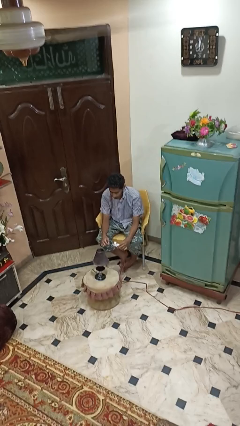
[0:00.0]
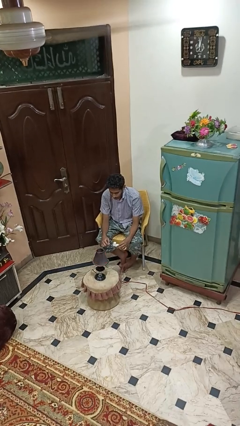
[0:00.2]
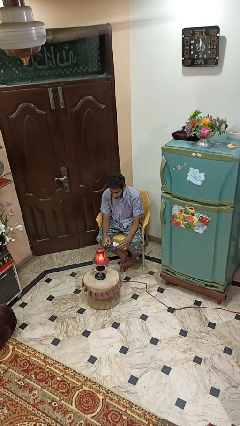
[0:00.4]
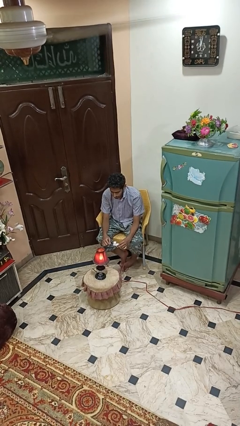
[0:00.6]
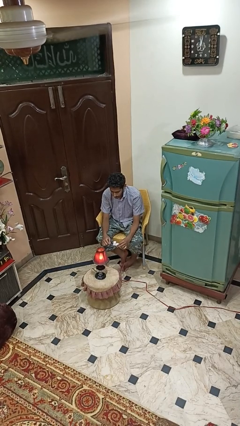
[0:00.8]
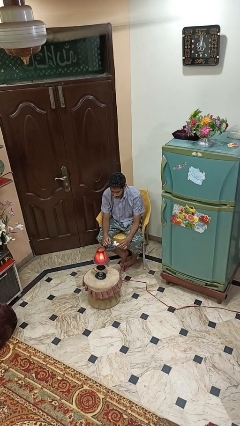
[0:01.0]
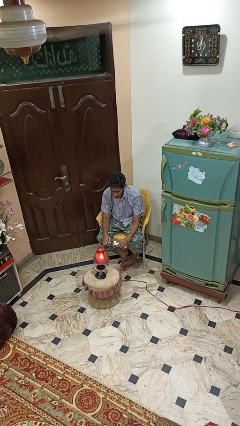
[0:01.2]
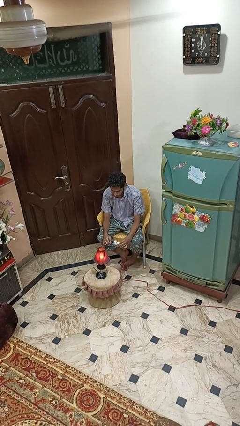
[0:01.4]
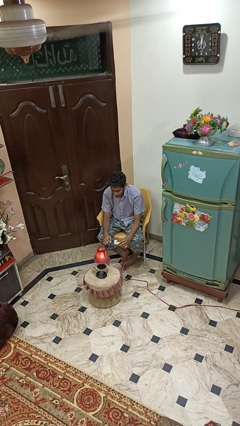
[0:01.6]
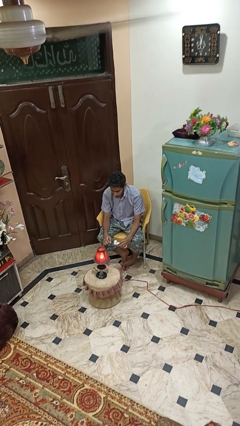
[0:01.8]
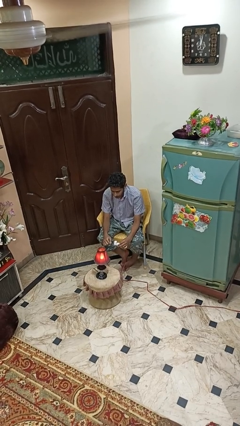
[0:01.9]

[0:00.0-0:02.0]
person turns on lamp

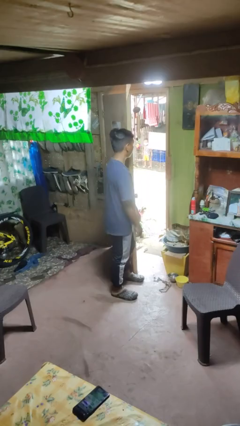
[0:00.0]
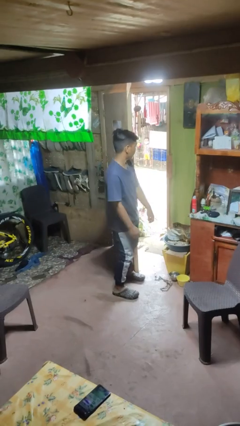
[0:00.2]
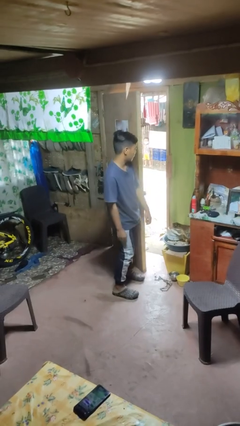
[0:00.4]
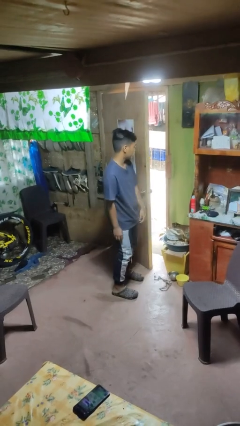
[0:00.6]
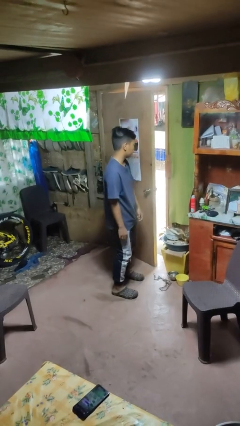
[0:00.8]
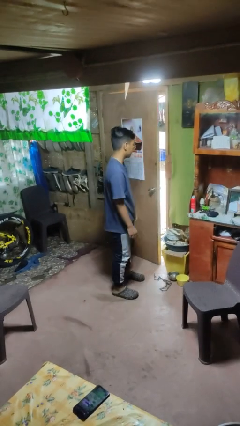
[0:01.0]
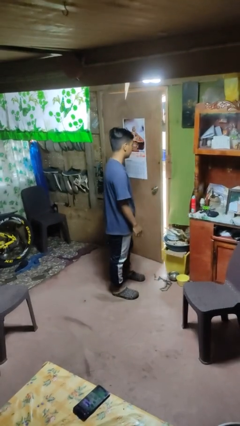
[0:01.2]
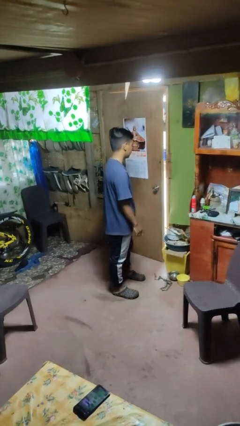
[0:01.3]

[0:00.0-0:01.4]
person closes door with hip

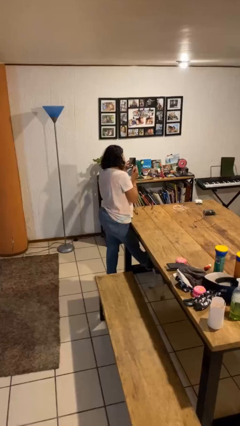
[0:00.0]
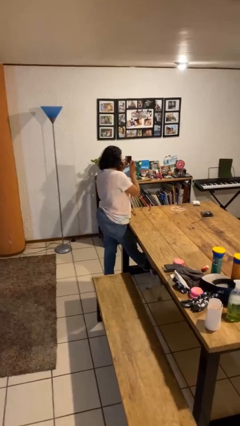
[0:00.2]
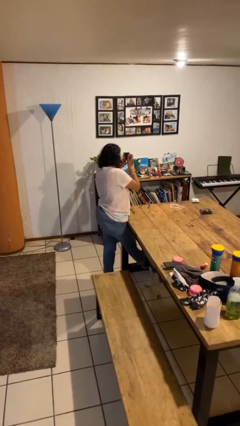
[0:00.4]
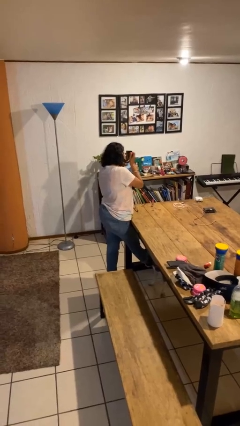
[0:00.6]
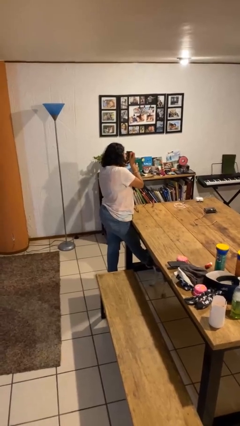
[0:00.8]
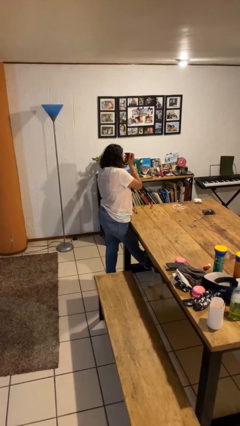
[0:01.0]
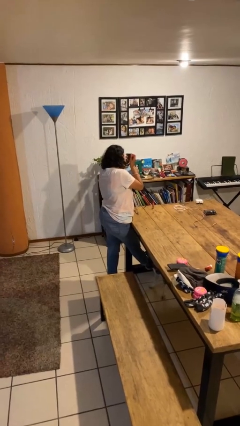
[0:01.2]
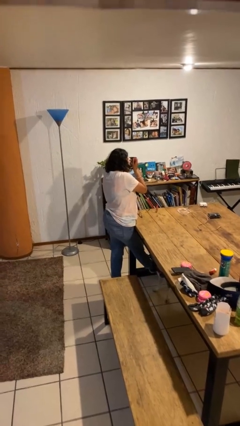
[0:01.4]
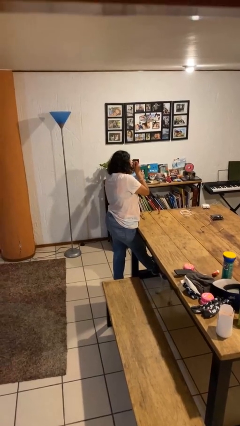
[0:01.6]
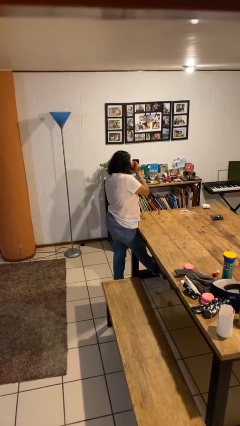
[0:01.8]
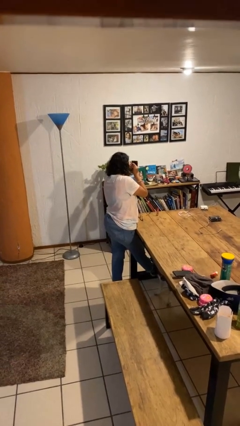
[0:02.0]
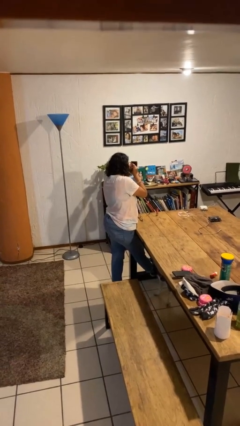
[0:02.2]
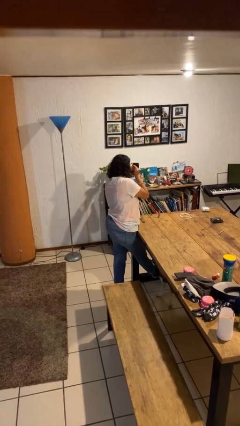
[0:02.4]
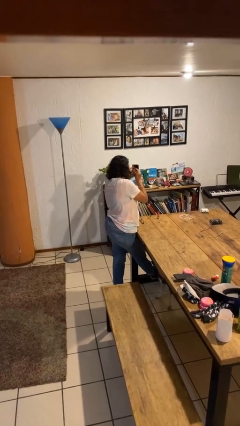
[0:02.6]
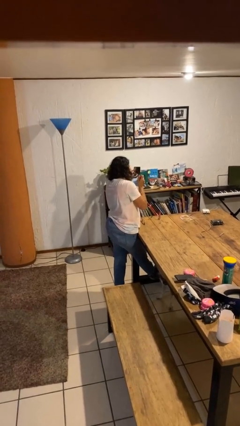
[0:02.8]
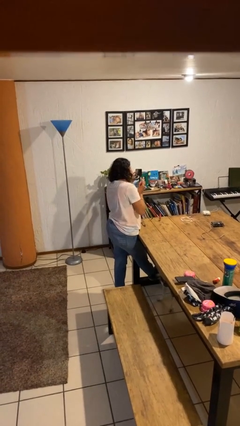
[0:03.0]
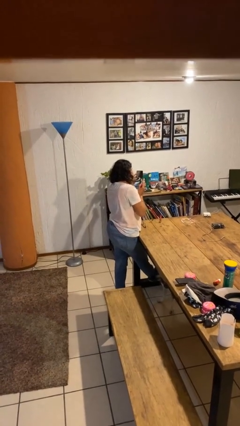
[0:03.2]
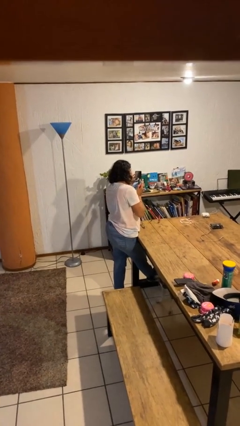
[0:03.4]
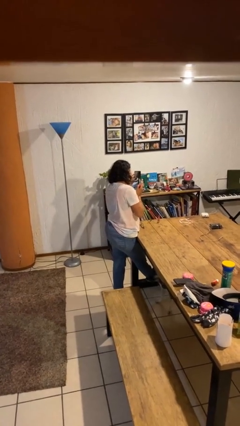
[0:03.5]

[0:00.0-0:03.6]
person applies eye makeup

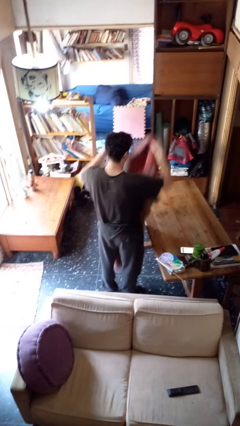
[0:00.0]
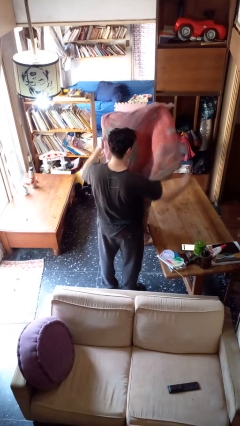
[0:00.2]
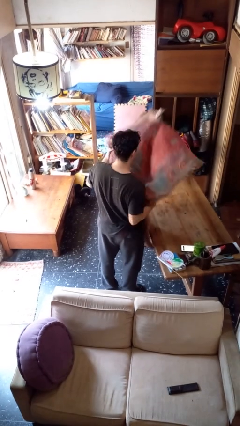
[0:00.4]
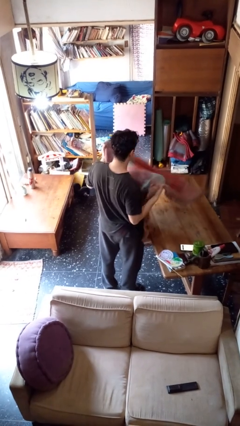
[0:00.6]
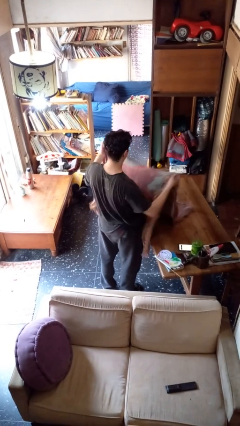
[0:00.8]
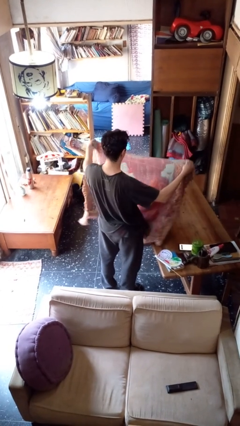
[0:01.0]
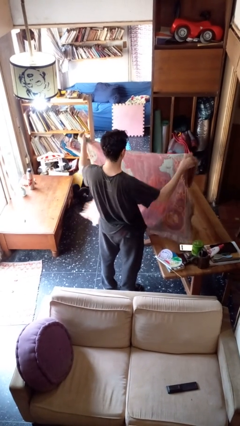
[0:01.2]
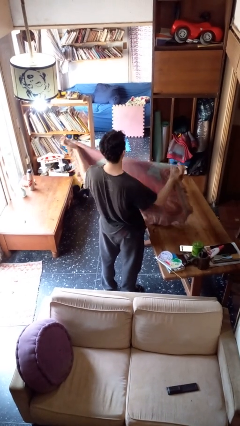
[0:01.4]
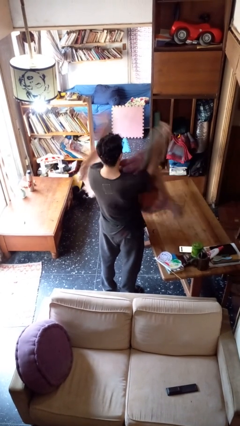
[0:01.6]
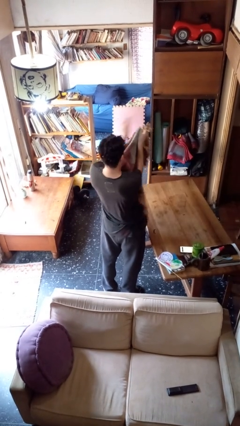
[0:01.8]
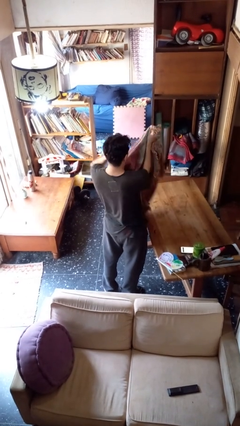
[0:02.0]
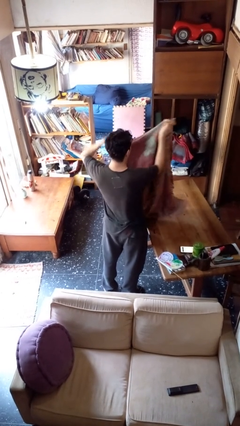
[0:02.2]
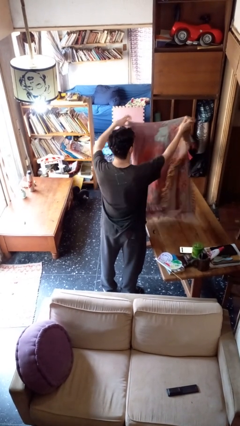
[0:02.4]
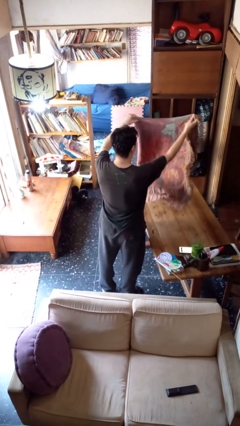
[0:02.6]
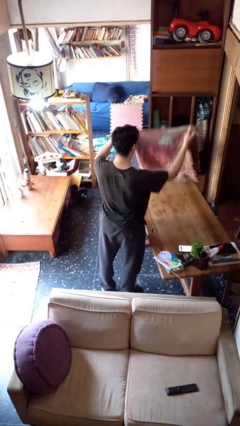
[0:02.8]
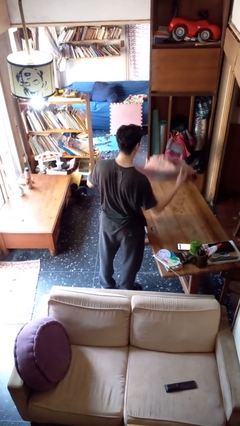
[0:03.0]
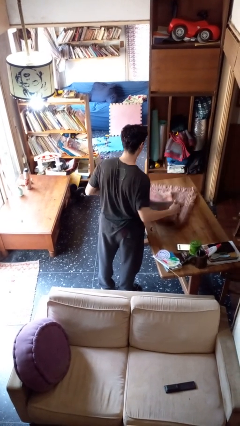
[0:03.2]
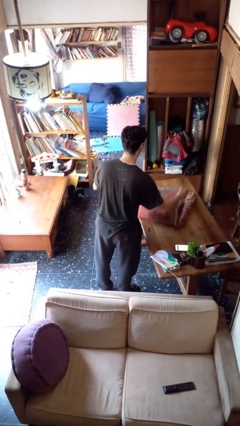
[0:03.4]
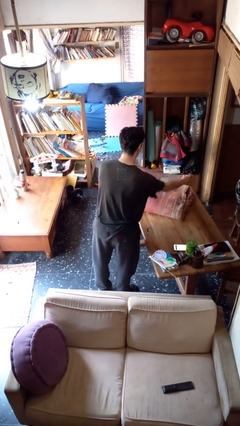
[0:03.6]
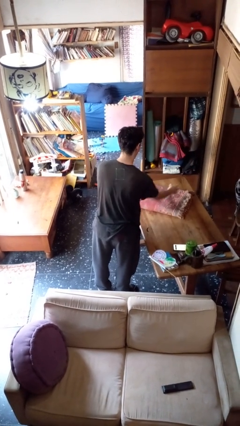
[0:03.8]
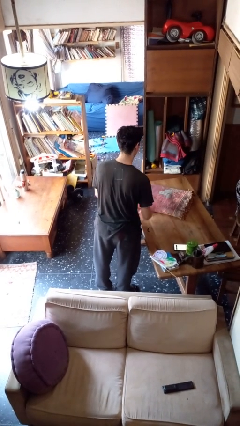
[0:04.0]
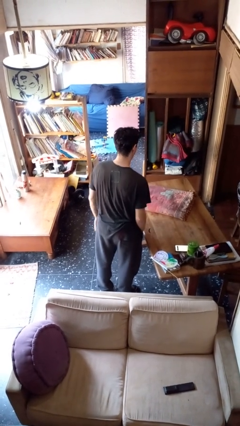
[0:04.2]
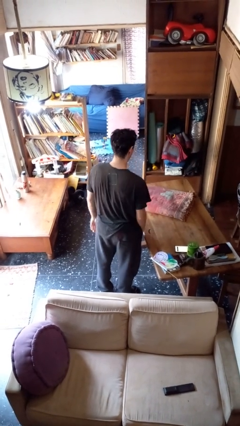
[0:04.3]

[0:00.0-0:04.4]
person folds blanket

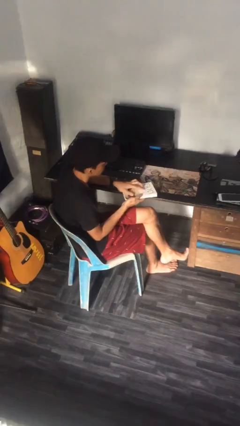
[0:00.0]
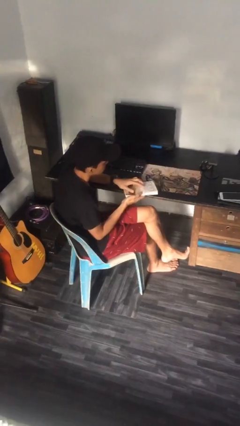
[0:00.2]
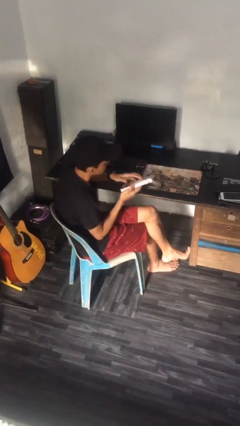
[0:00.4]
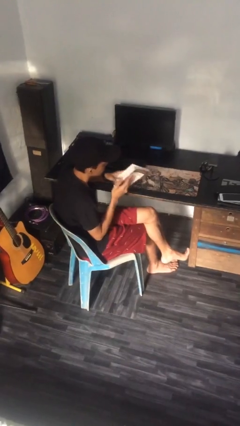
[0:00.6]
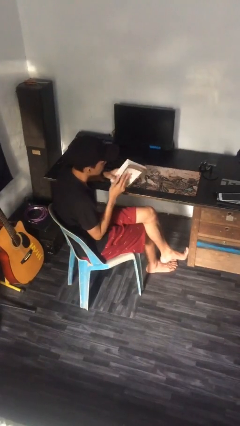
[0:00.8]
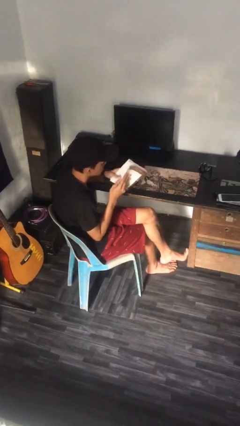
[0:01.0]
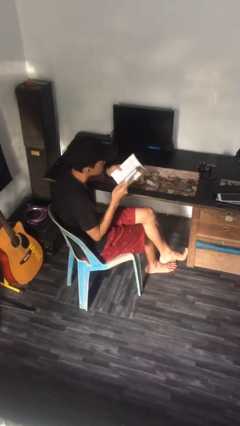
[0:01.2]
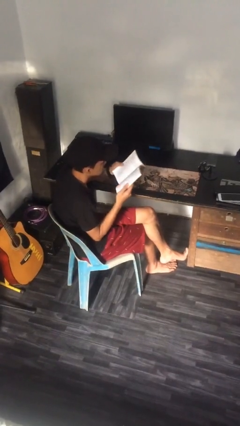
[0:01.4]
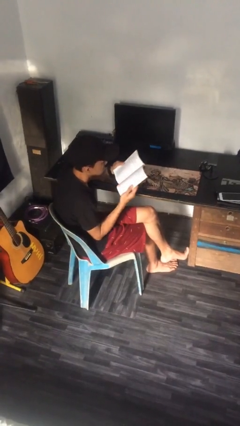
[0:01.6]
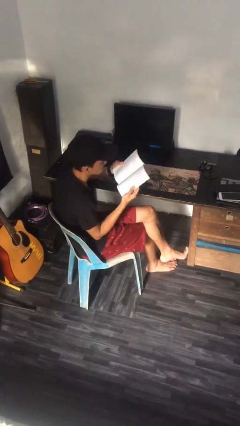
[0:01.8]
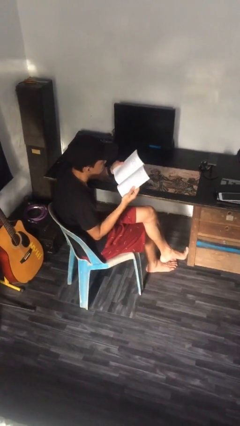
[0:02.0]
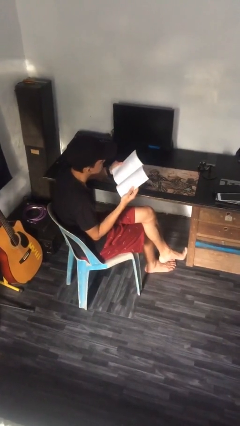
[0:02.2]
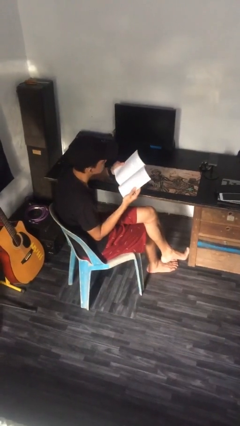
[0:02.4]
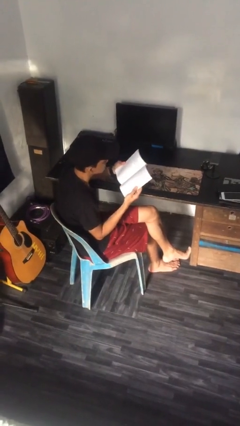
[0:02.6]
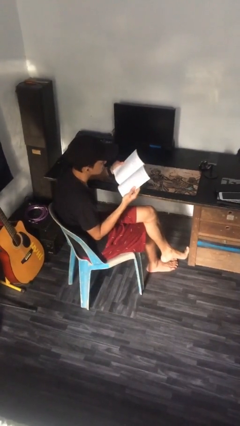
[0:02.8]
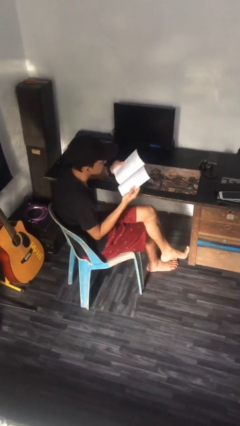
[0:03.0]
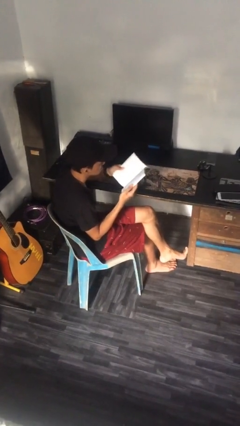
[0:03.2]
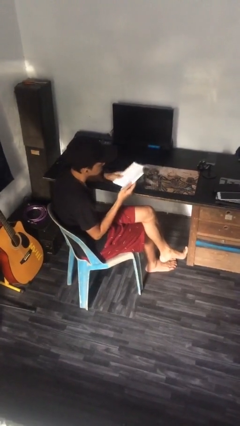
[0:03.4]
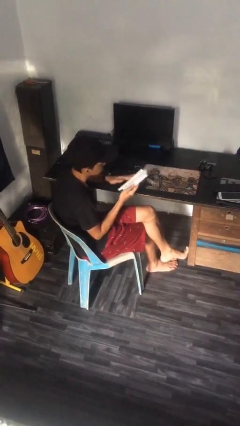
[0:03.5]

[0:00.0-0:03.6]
person reads document

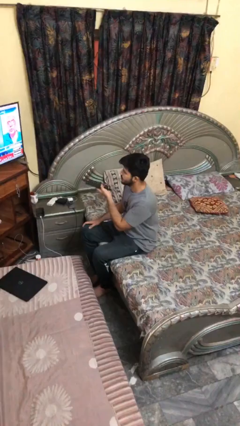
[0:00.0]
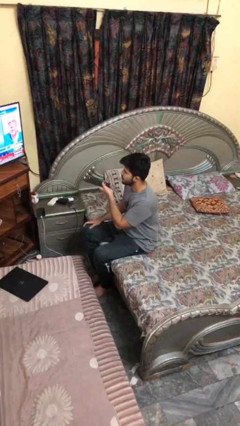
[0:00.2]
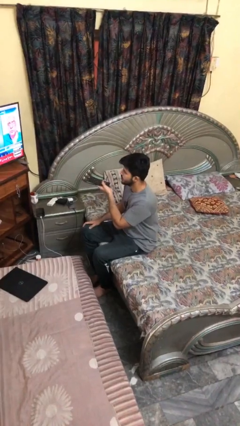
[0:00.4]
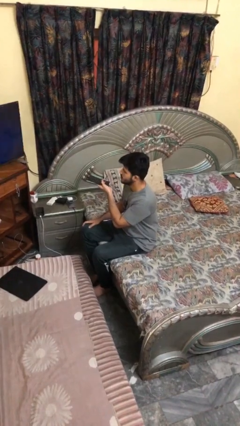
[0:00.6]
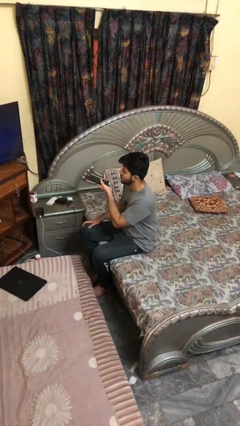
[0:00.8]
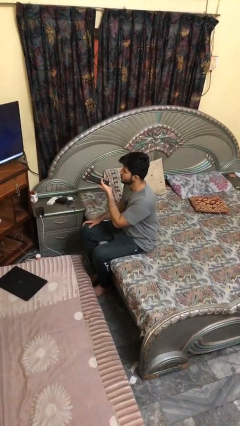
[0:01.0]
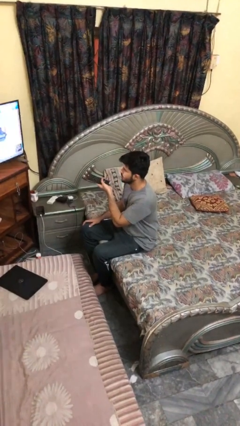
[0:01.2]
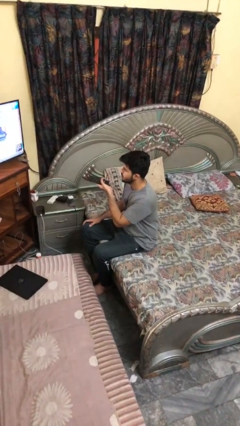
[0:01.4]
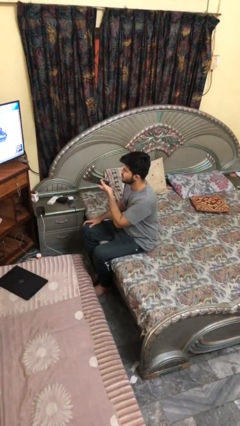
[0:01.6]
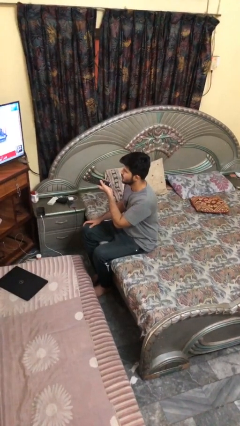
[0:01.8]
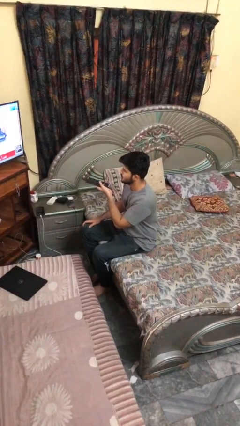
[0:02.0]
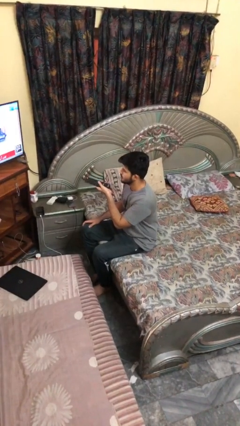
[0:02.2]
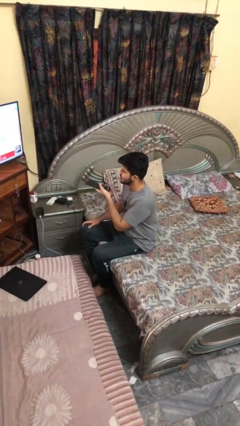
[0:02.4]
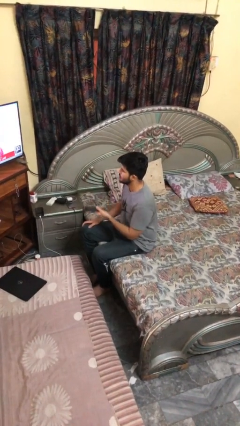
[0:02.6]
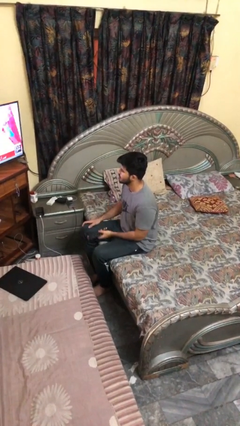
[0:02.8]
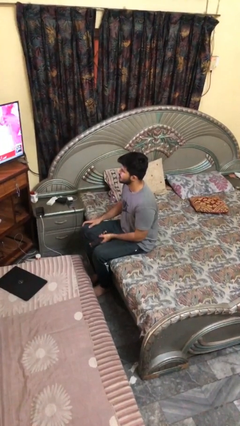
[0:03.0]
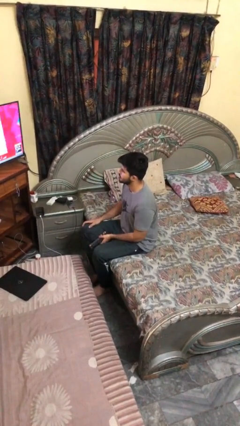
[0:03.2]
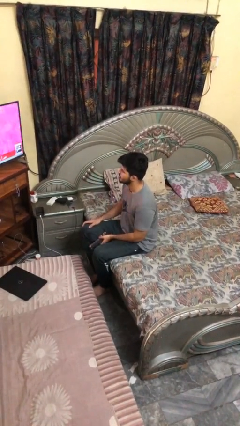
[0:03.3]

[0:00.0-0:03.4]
person uses television remote
